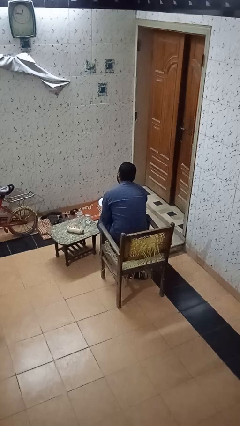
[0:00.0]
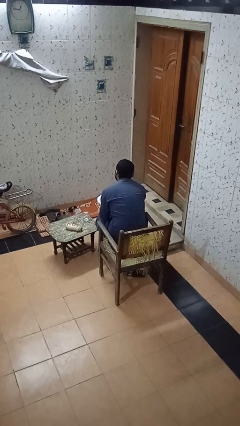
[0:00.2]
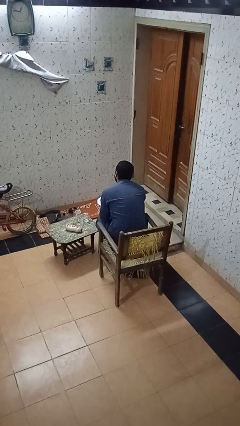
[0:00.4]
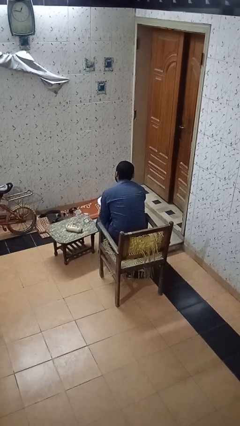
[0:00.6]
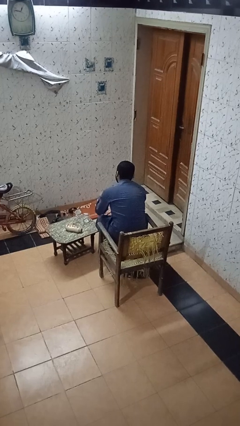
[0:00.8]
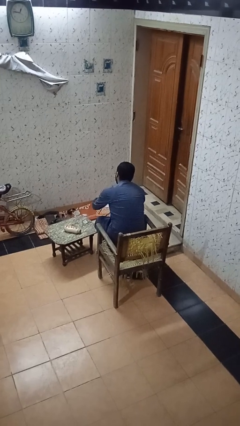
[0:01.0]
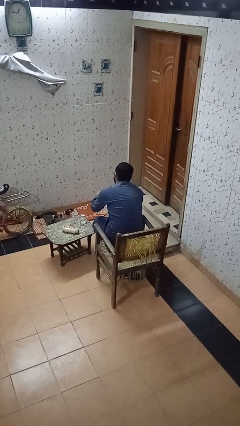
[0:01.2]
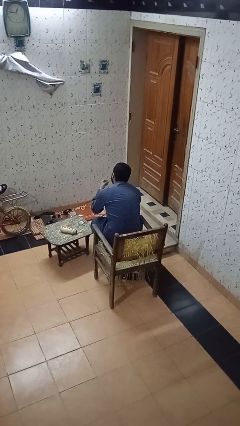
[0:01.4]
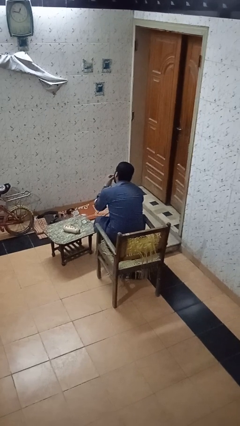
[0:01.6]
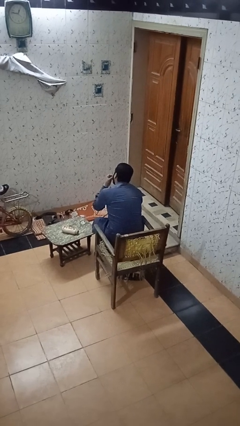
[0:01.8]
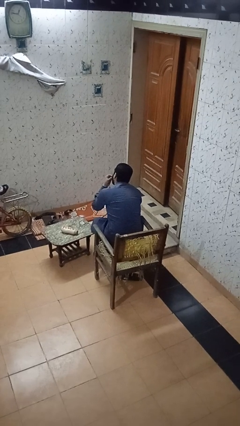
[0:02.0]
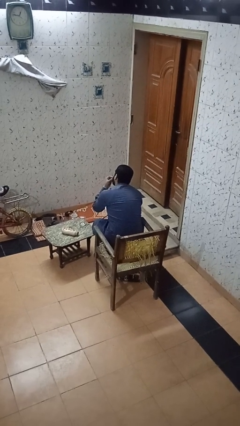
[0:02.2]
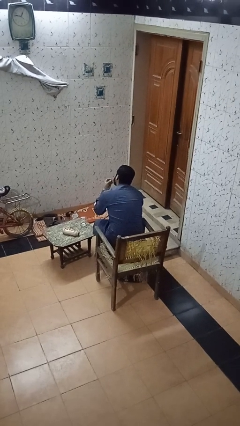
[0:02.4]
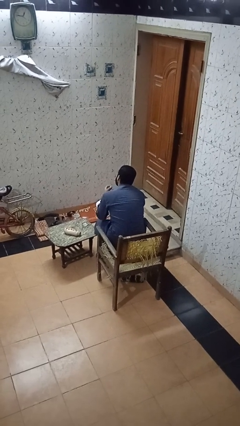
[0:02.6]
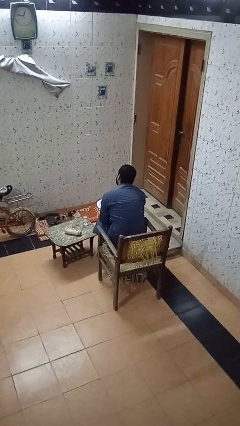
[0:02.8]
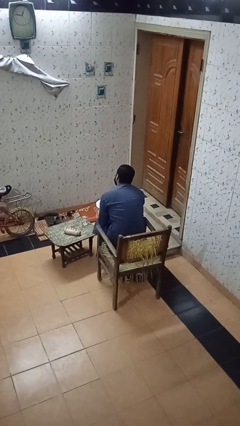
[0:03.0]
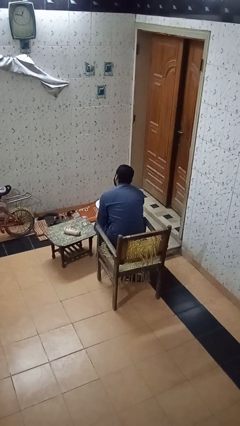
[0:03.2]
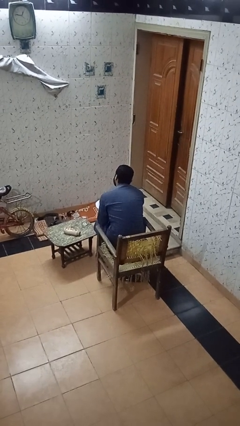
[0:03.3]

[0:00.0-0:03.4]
person eats with hands

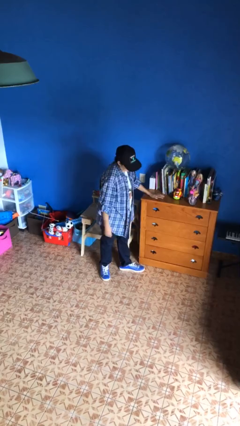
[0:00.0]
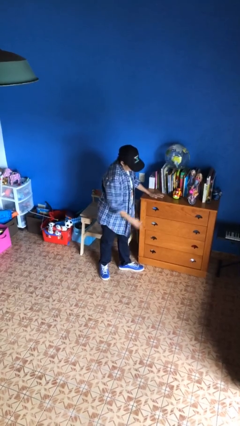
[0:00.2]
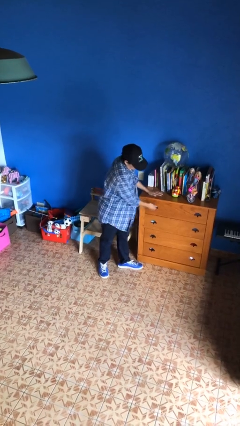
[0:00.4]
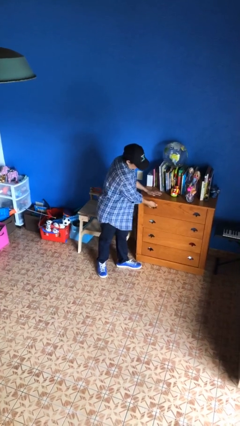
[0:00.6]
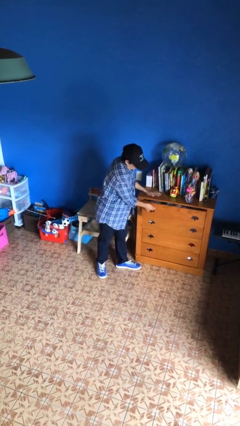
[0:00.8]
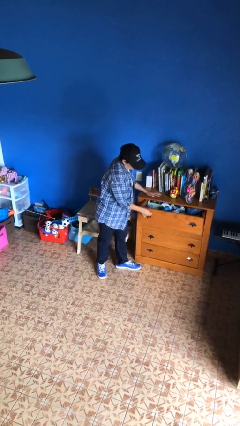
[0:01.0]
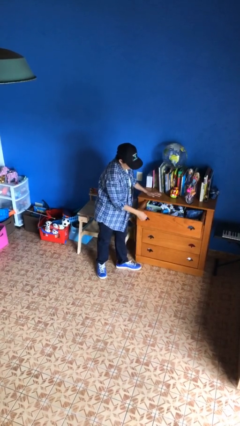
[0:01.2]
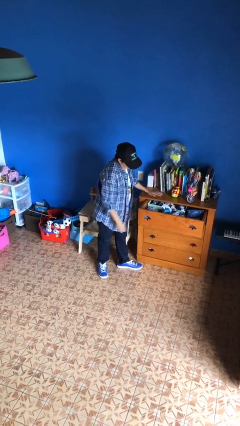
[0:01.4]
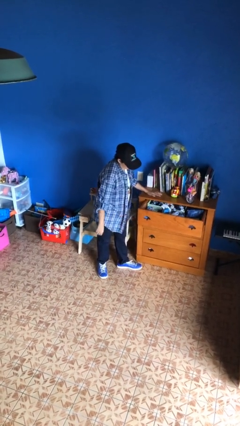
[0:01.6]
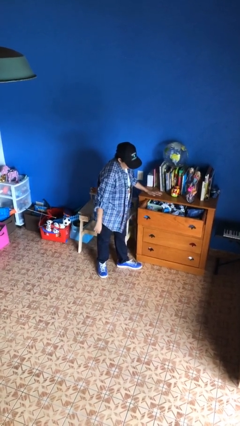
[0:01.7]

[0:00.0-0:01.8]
person opens dresser drawer

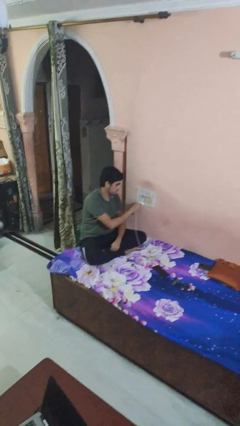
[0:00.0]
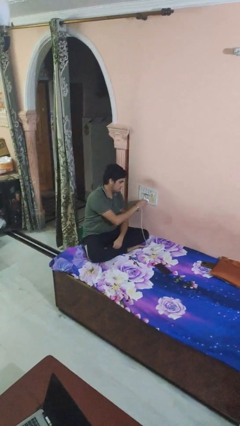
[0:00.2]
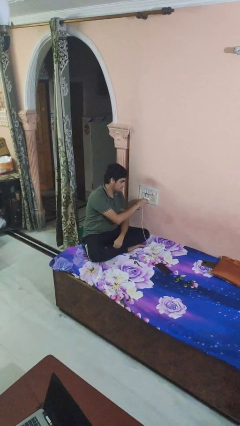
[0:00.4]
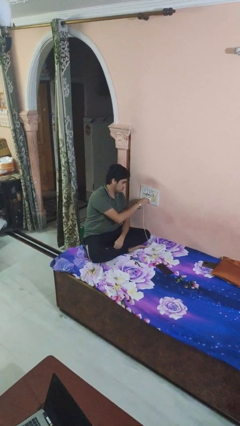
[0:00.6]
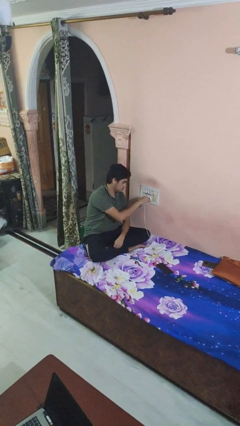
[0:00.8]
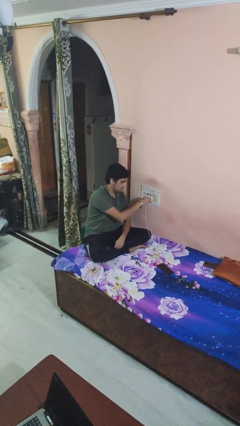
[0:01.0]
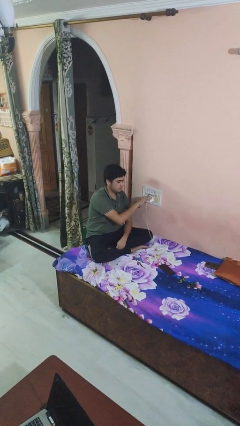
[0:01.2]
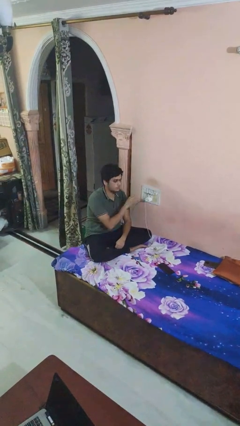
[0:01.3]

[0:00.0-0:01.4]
person plugs into electrical socket

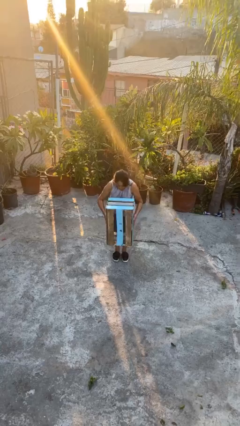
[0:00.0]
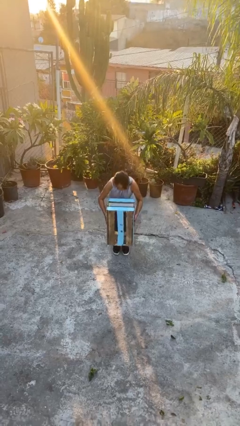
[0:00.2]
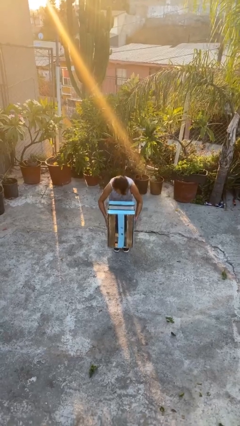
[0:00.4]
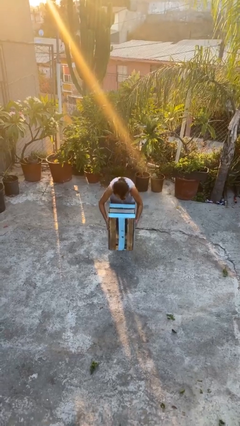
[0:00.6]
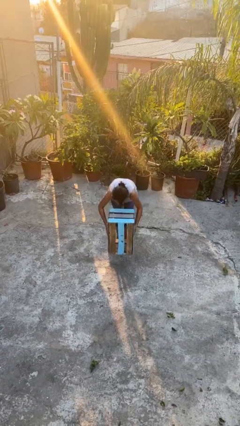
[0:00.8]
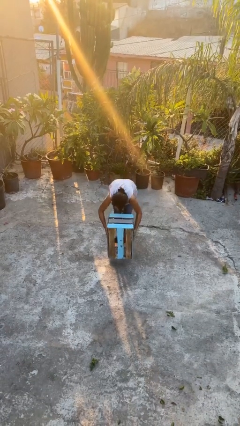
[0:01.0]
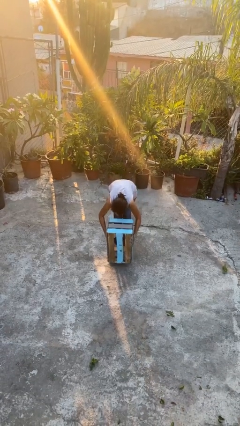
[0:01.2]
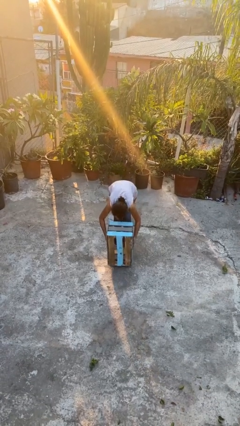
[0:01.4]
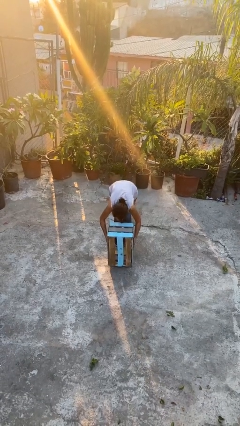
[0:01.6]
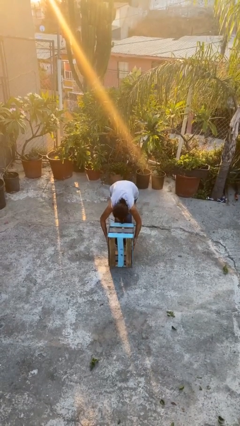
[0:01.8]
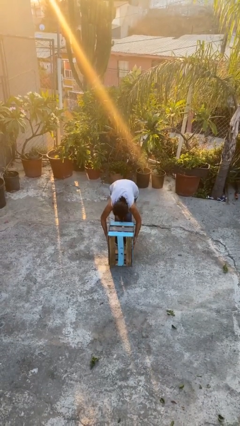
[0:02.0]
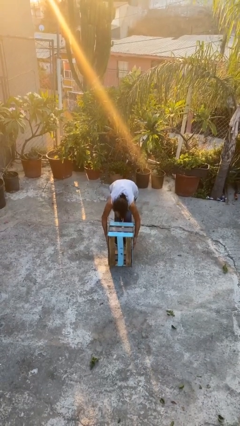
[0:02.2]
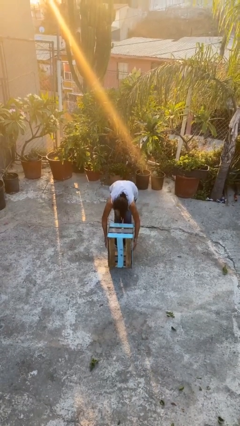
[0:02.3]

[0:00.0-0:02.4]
person puts down object on floor

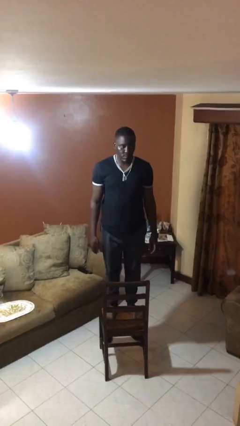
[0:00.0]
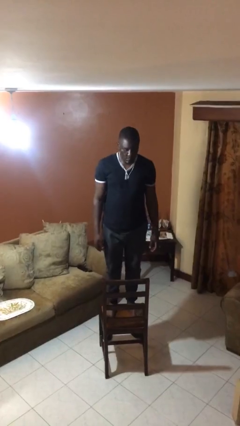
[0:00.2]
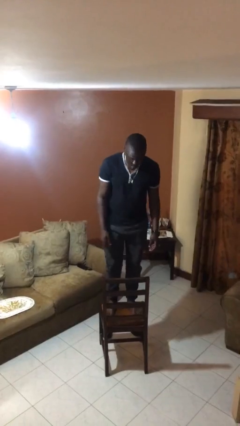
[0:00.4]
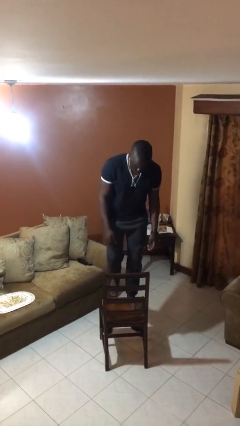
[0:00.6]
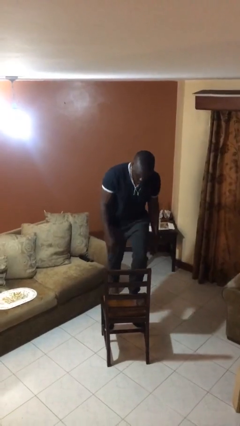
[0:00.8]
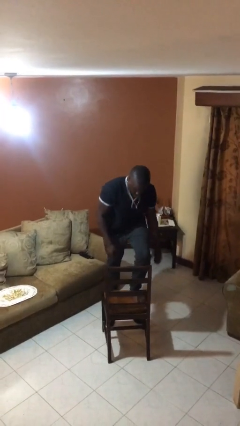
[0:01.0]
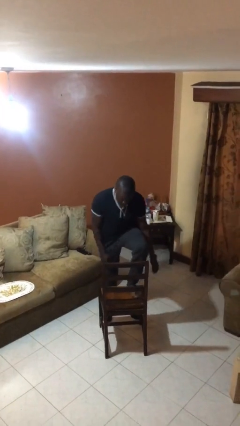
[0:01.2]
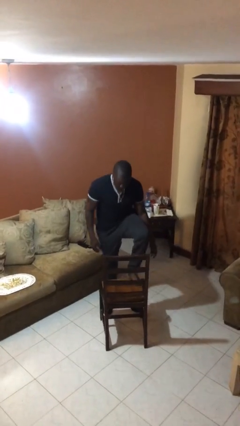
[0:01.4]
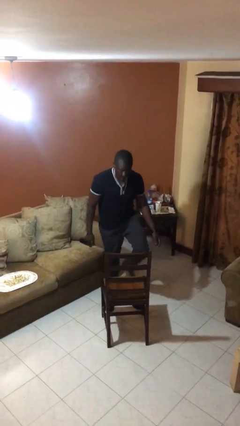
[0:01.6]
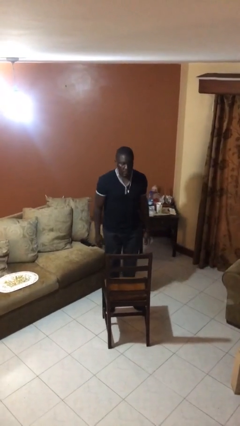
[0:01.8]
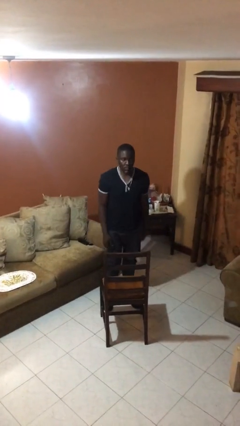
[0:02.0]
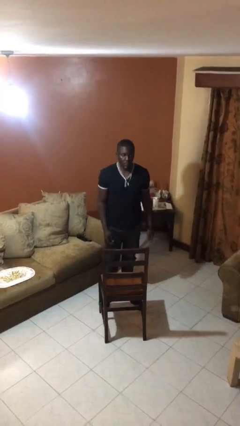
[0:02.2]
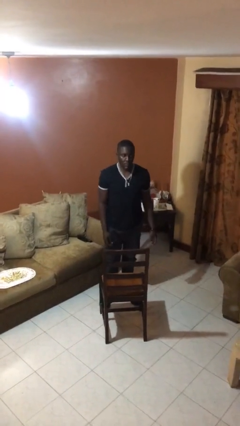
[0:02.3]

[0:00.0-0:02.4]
person climbs off chair

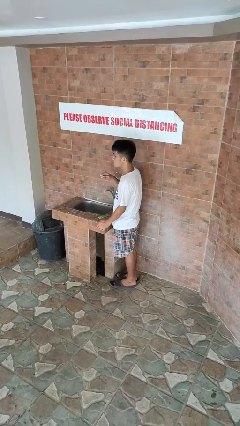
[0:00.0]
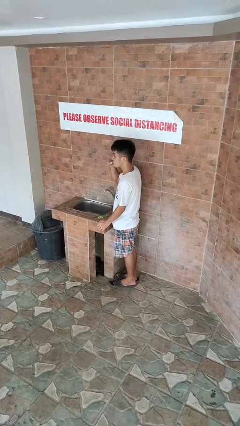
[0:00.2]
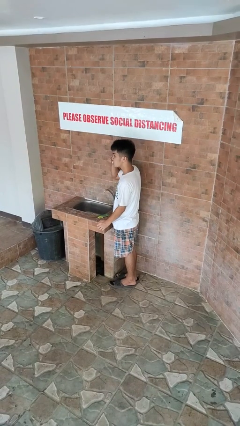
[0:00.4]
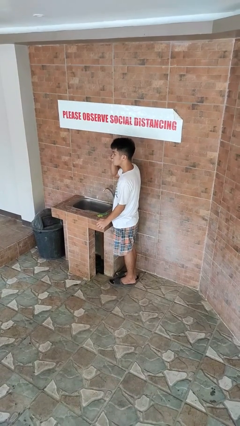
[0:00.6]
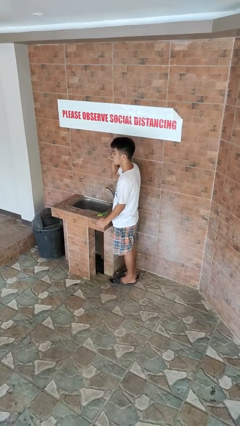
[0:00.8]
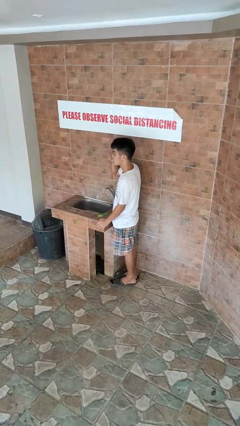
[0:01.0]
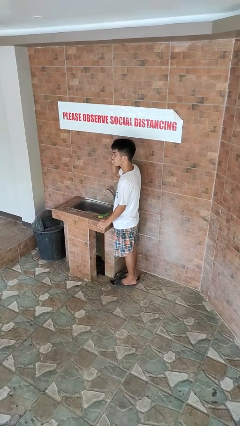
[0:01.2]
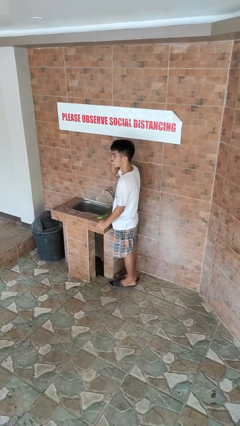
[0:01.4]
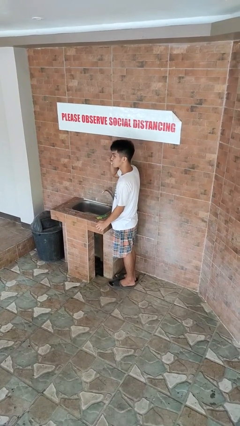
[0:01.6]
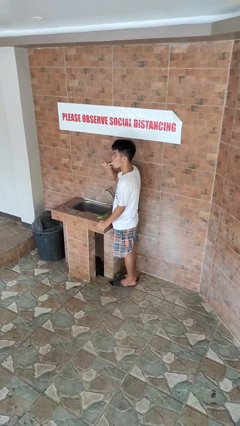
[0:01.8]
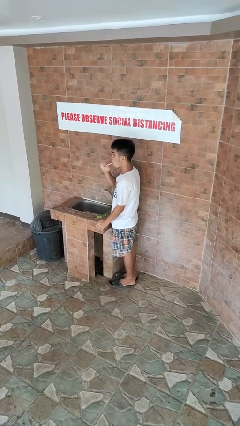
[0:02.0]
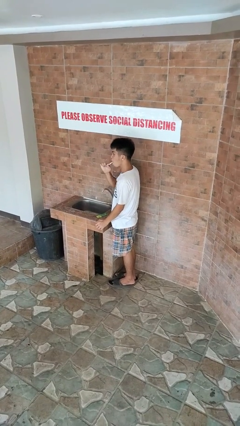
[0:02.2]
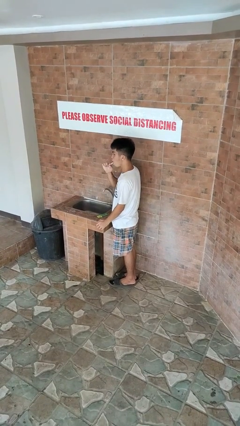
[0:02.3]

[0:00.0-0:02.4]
person brushes teeth

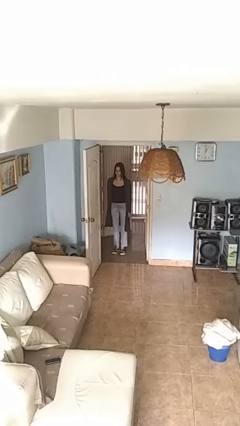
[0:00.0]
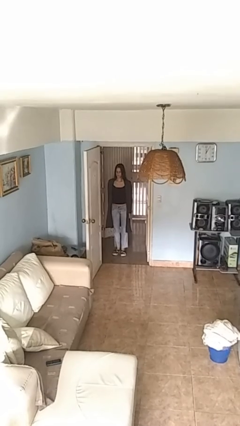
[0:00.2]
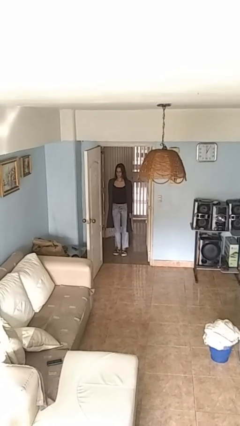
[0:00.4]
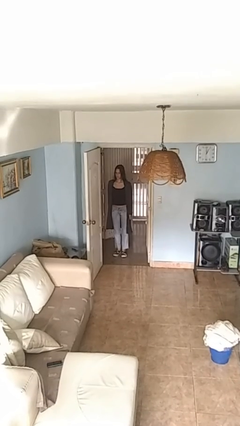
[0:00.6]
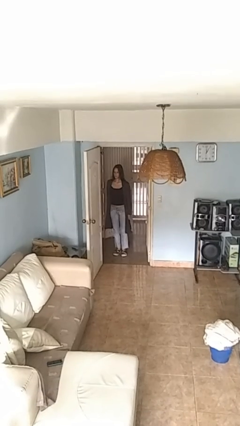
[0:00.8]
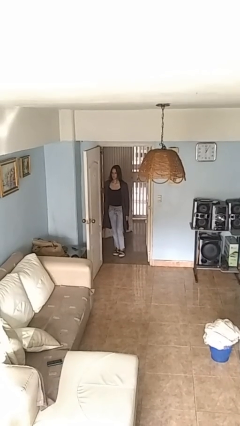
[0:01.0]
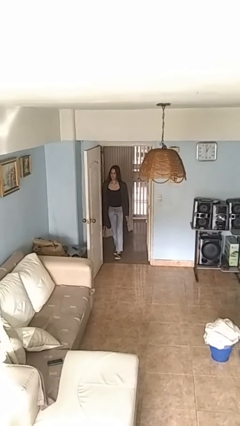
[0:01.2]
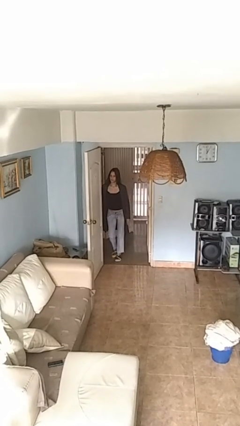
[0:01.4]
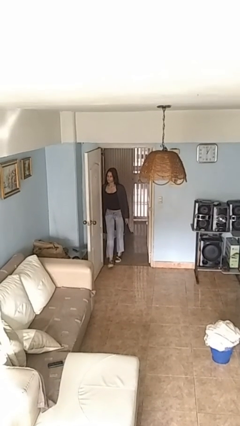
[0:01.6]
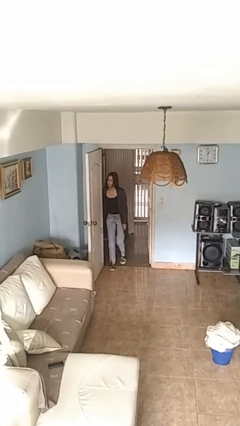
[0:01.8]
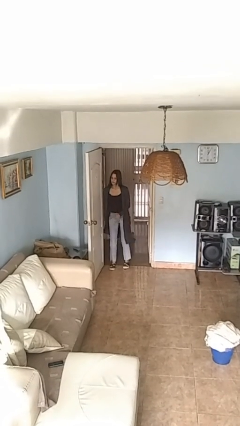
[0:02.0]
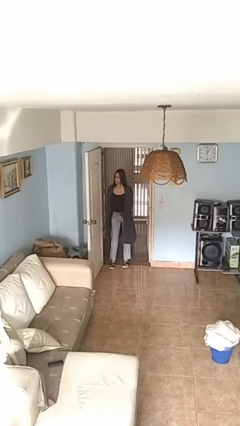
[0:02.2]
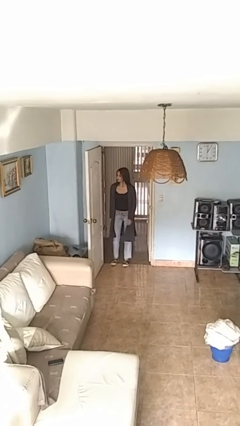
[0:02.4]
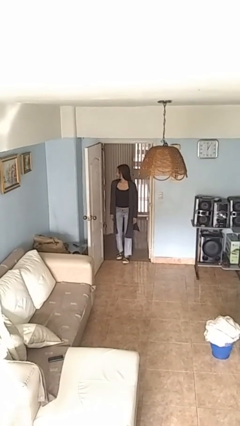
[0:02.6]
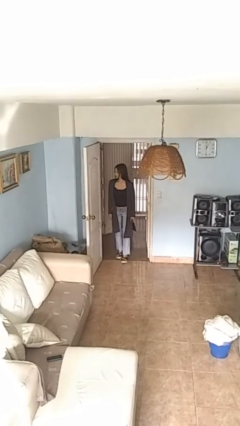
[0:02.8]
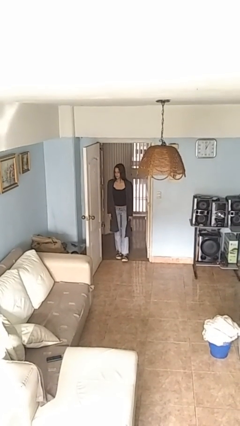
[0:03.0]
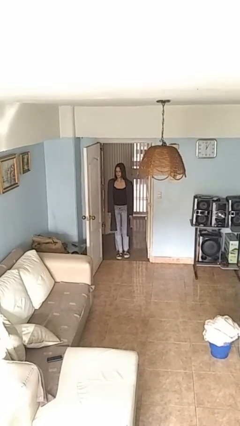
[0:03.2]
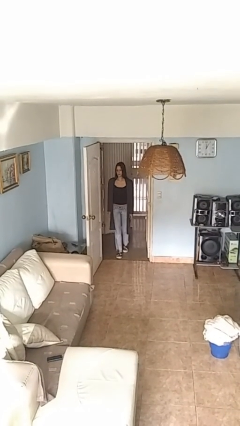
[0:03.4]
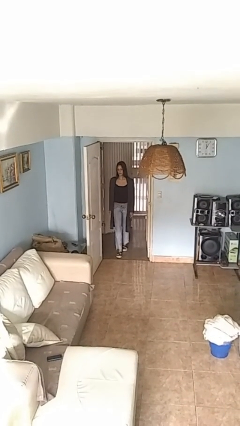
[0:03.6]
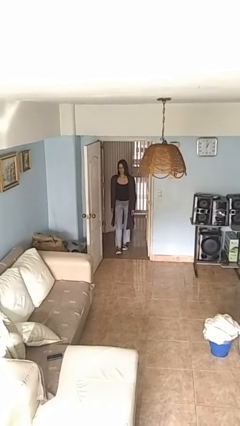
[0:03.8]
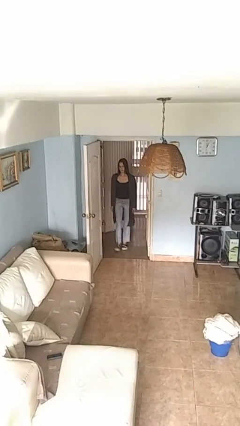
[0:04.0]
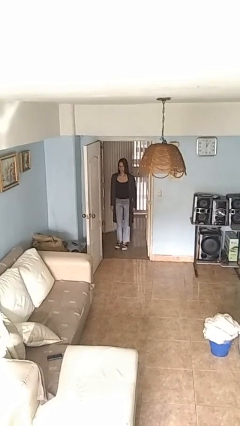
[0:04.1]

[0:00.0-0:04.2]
person bumps into wall
